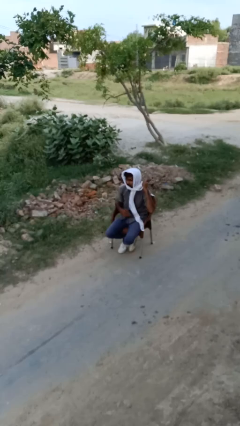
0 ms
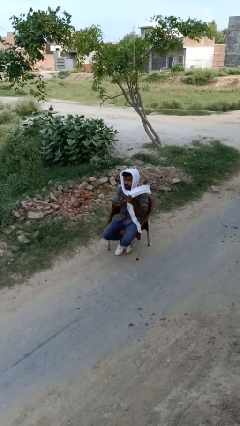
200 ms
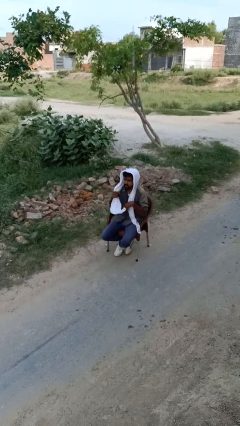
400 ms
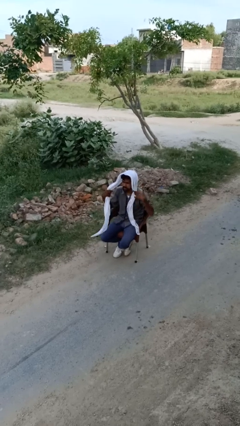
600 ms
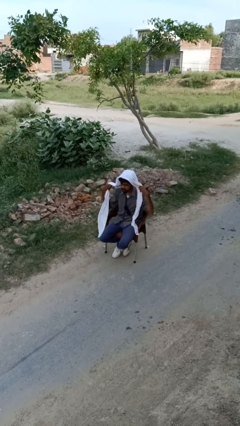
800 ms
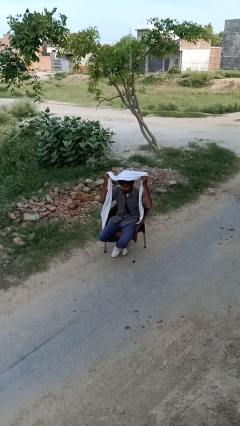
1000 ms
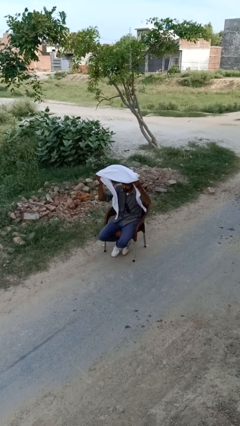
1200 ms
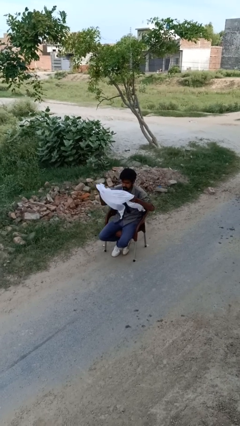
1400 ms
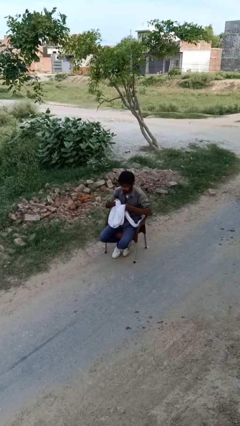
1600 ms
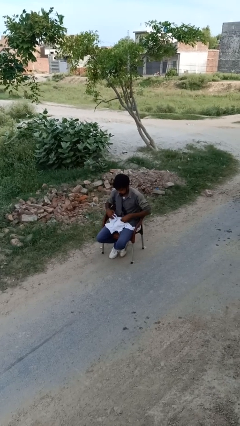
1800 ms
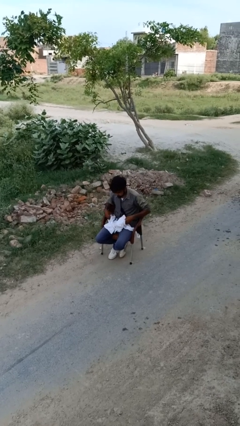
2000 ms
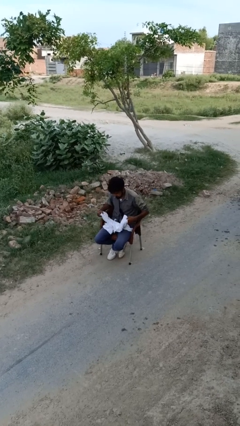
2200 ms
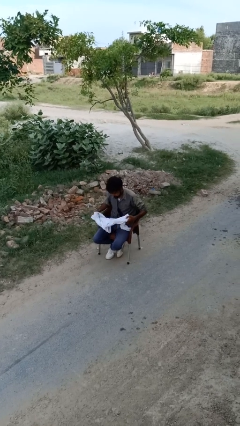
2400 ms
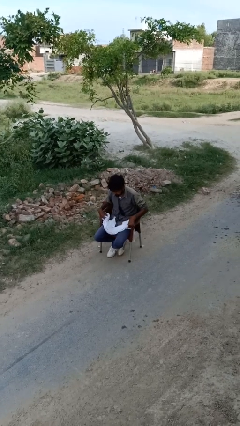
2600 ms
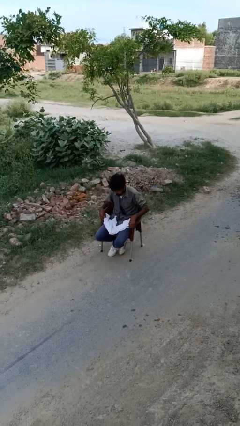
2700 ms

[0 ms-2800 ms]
person takes off scarf

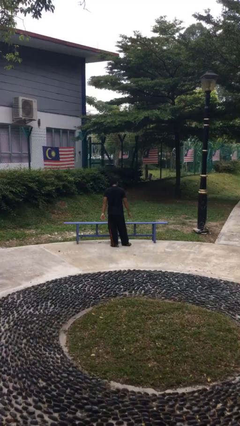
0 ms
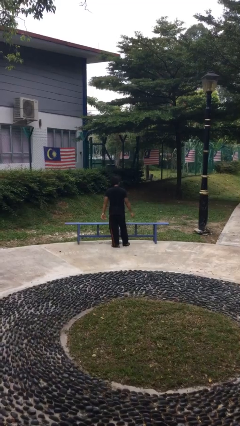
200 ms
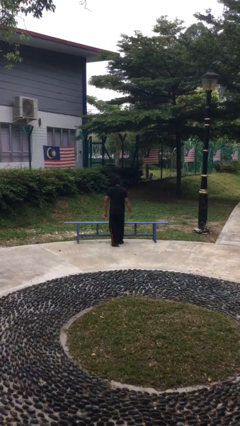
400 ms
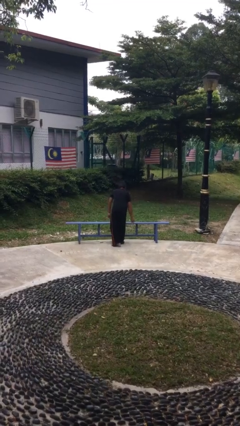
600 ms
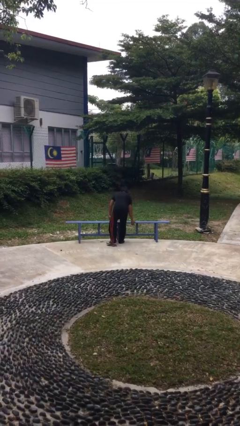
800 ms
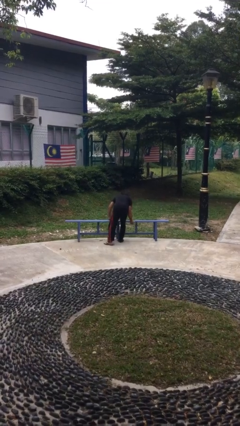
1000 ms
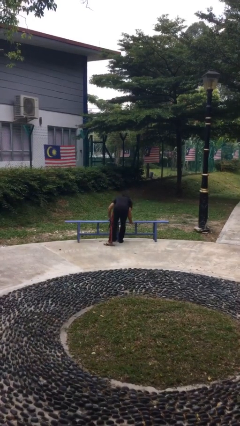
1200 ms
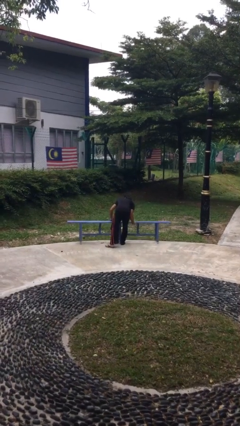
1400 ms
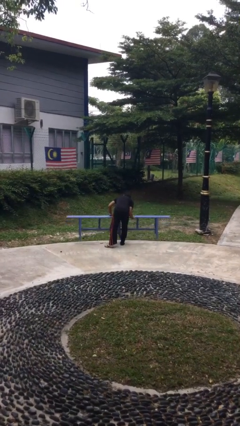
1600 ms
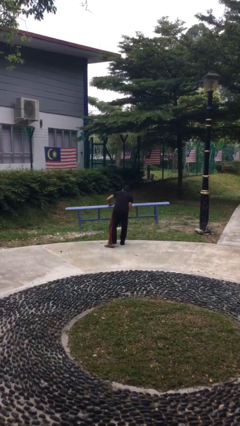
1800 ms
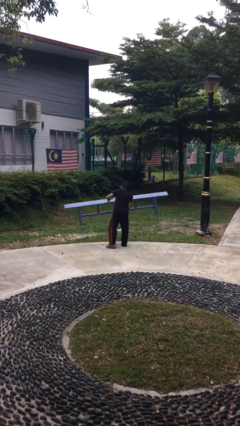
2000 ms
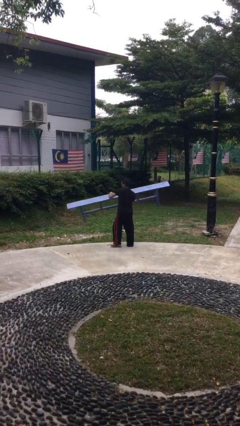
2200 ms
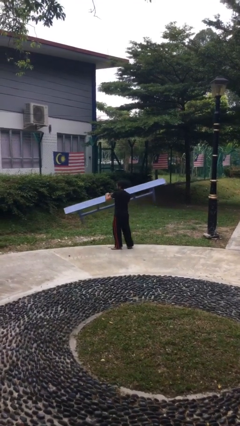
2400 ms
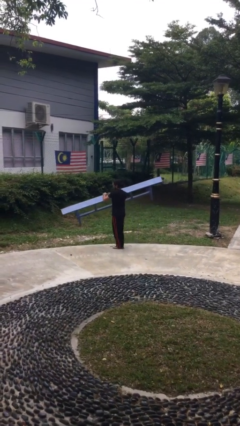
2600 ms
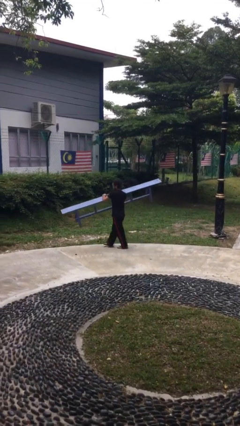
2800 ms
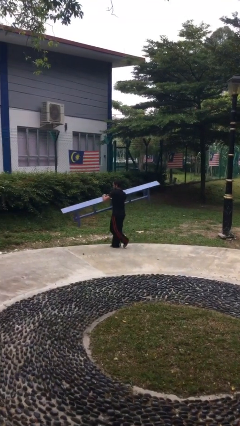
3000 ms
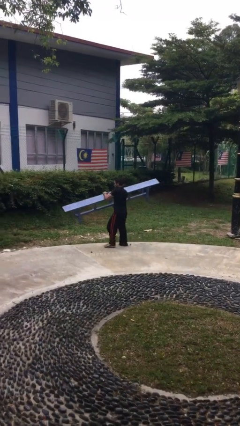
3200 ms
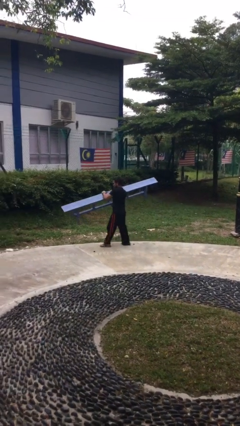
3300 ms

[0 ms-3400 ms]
person picks up object from floor

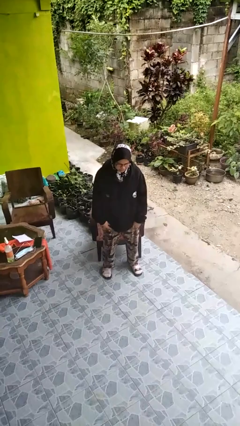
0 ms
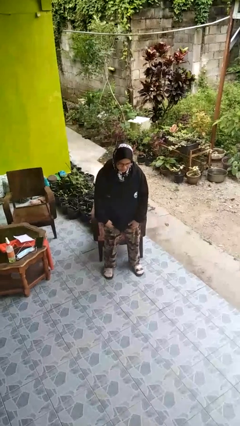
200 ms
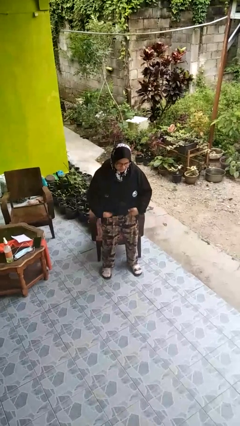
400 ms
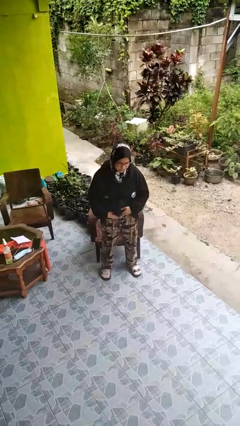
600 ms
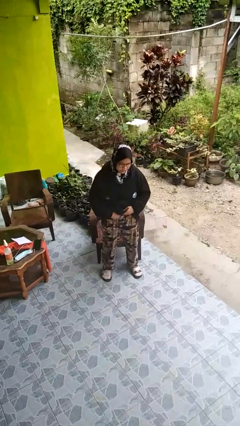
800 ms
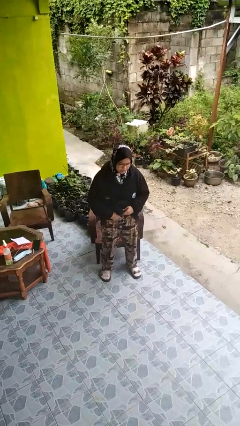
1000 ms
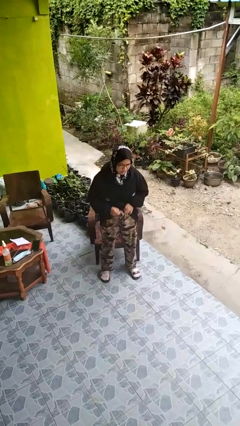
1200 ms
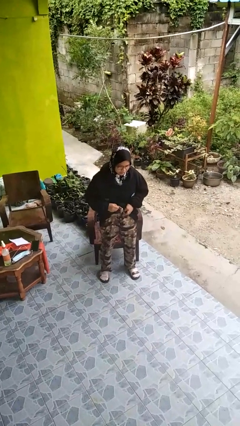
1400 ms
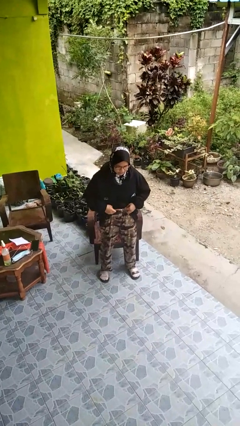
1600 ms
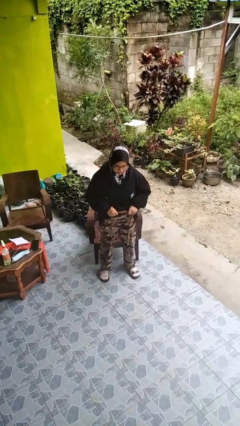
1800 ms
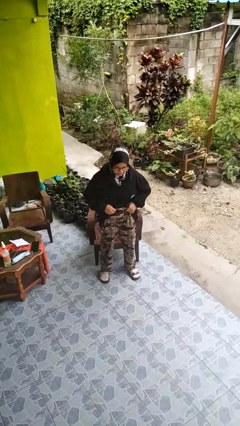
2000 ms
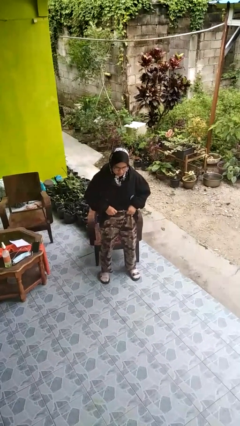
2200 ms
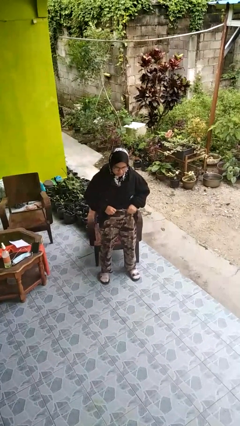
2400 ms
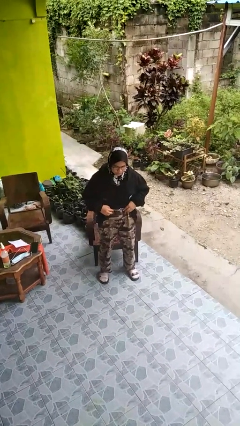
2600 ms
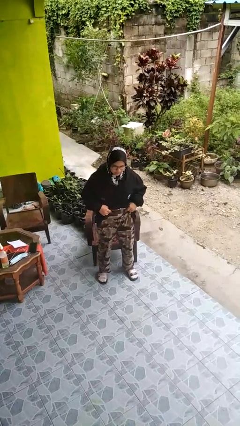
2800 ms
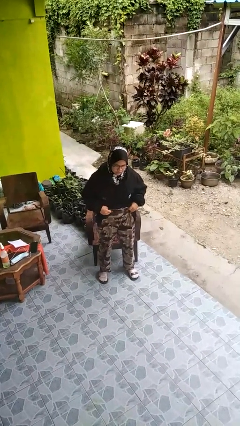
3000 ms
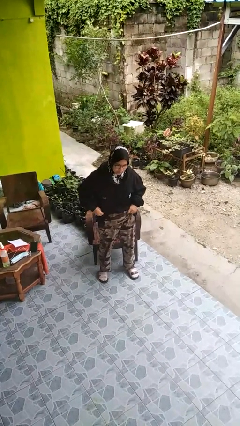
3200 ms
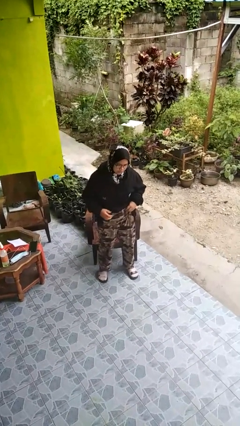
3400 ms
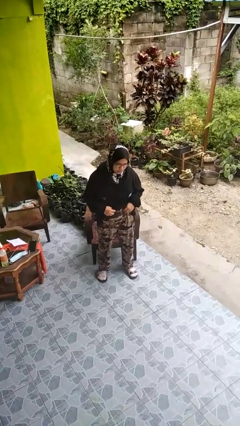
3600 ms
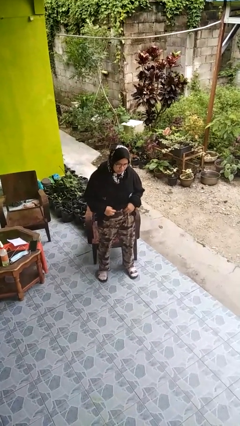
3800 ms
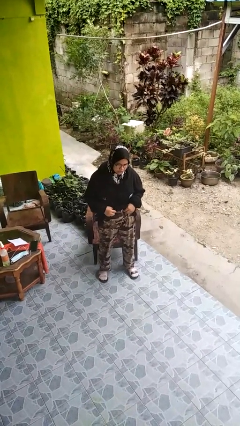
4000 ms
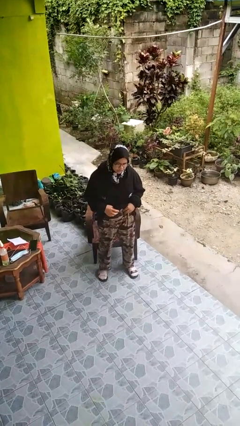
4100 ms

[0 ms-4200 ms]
person tucks in shirt

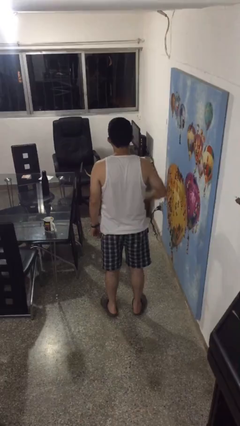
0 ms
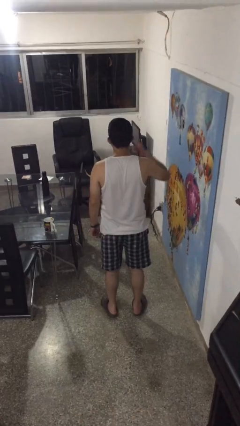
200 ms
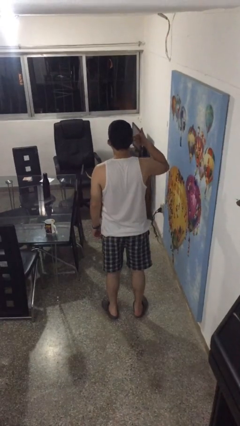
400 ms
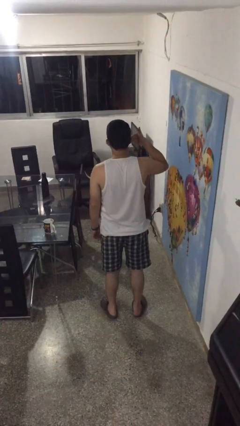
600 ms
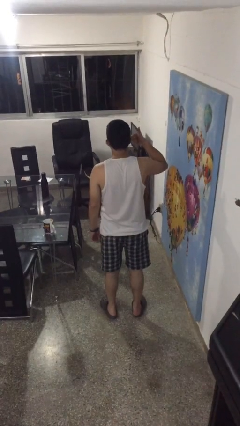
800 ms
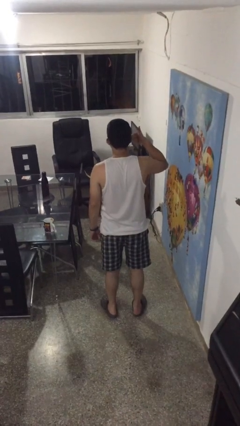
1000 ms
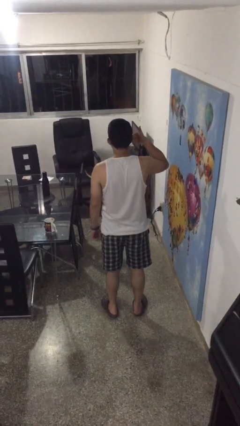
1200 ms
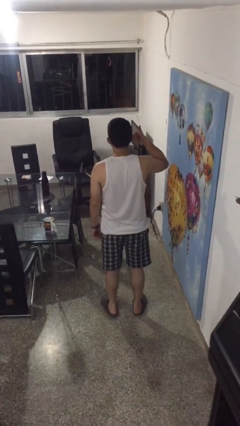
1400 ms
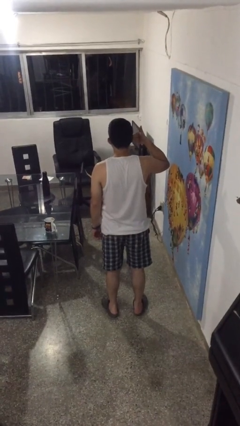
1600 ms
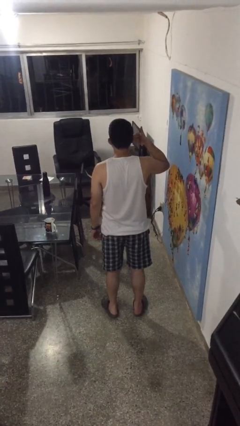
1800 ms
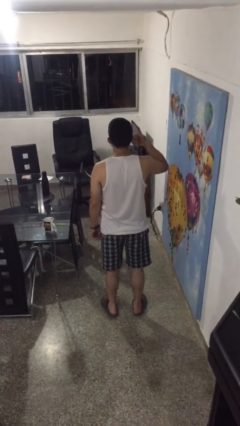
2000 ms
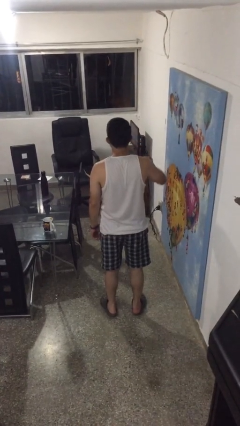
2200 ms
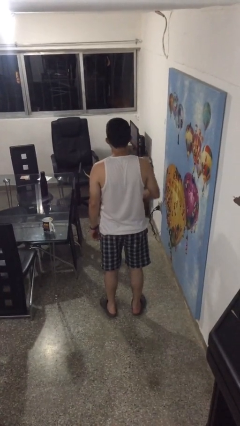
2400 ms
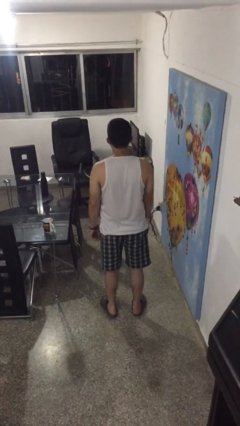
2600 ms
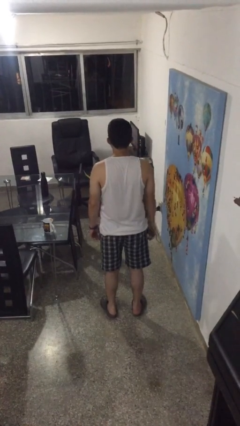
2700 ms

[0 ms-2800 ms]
person gestures thumbs up

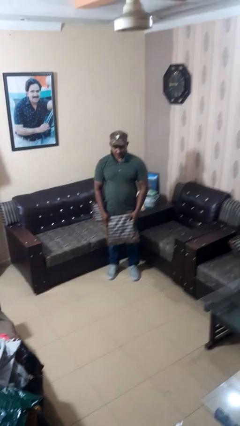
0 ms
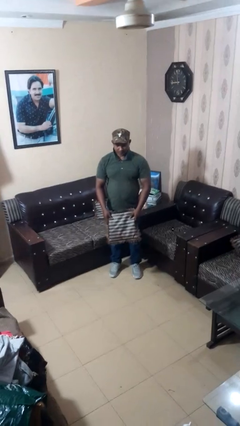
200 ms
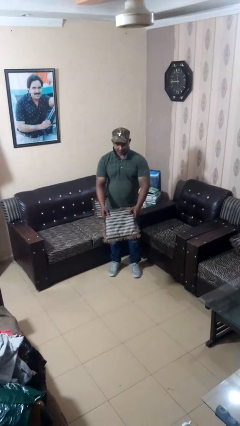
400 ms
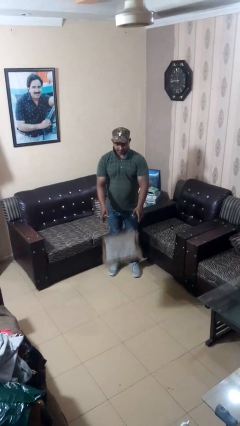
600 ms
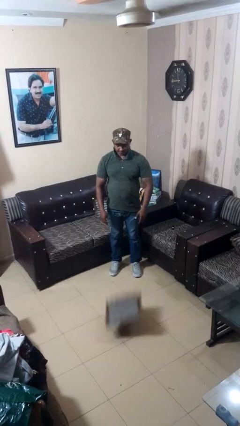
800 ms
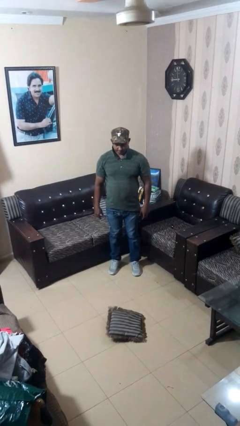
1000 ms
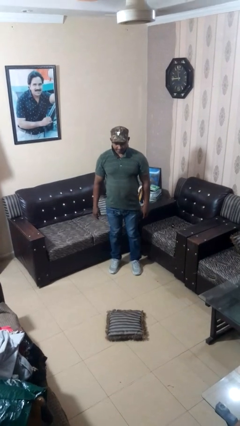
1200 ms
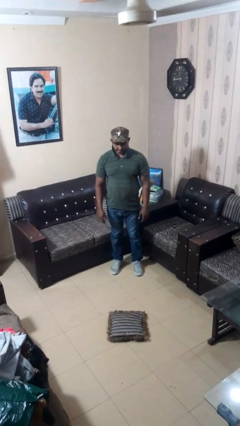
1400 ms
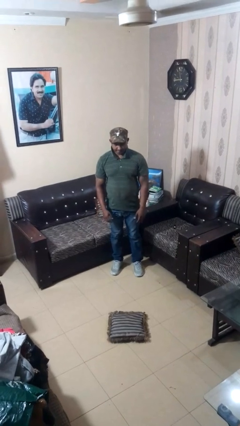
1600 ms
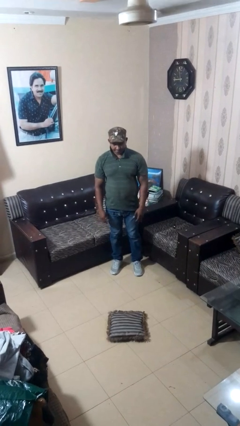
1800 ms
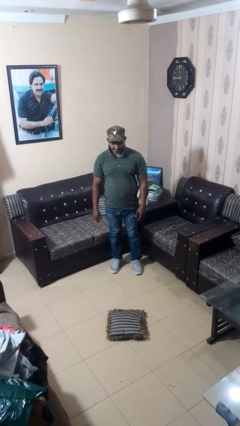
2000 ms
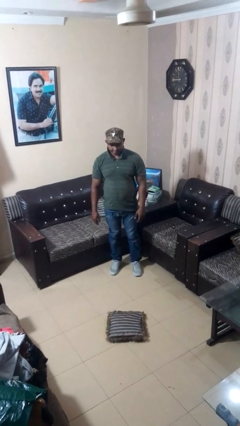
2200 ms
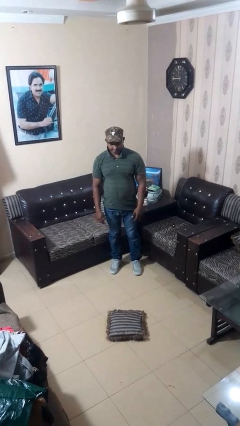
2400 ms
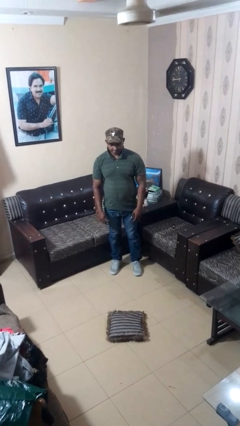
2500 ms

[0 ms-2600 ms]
person throws object to ground

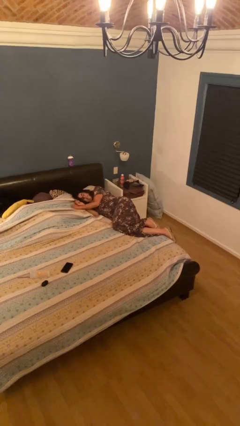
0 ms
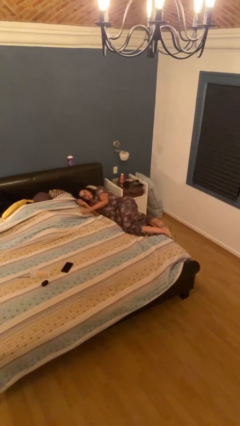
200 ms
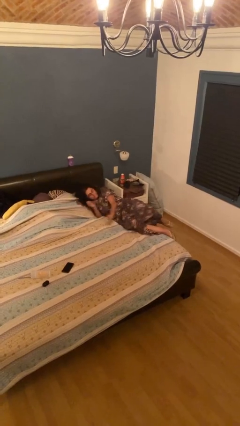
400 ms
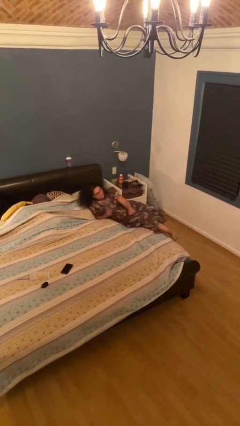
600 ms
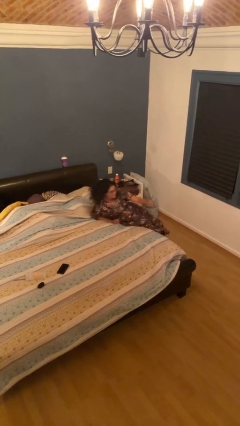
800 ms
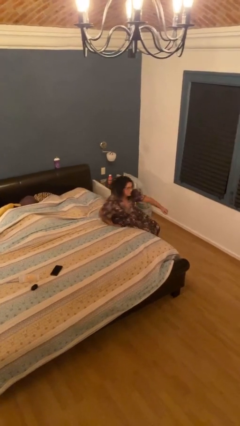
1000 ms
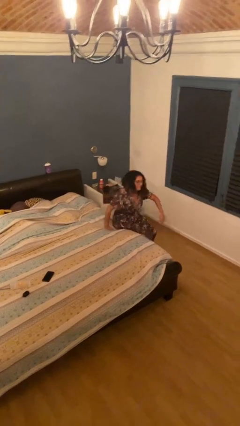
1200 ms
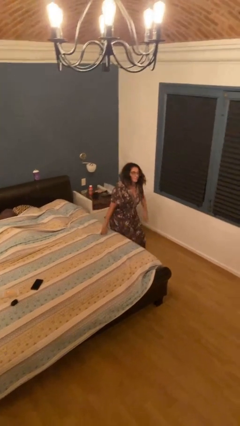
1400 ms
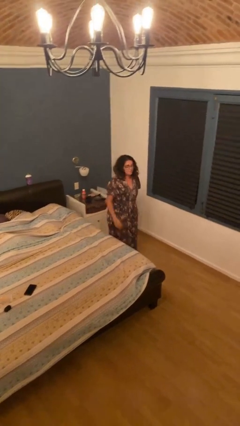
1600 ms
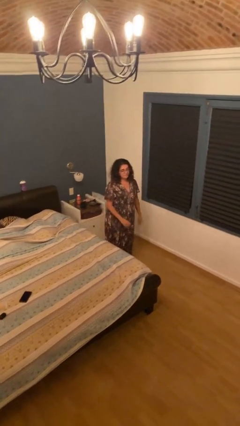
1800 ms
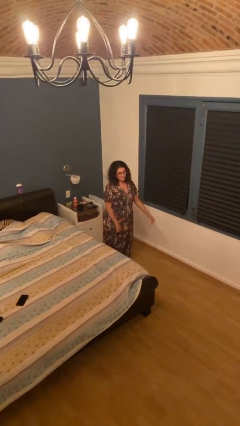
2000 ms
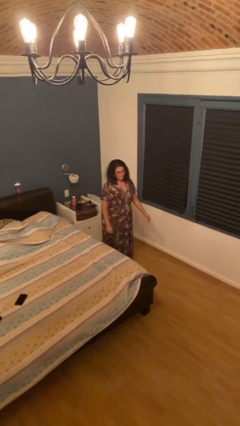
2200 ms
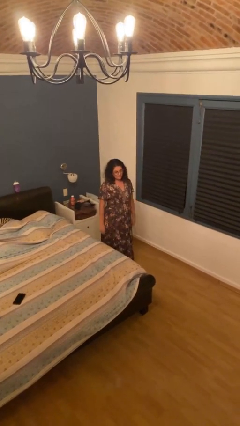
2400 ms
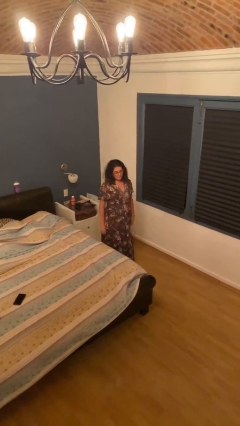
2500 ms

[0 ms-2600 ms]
person stands up
